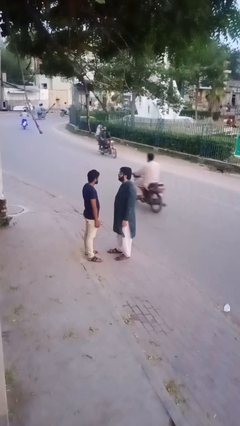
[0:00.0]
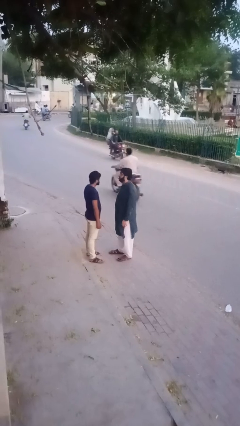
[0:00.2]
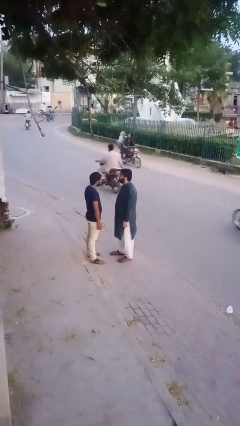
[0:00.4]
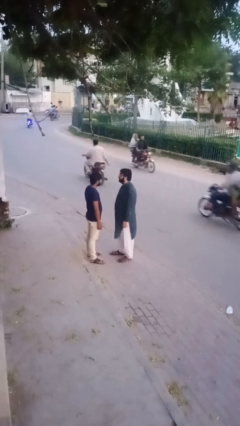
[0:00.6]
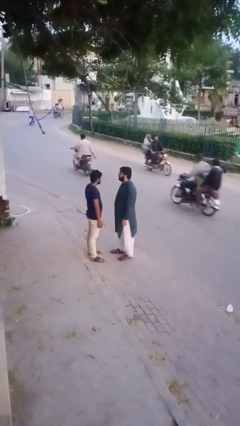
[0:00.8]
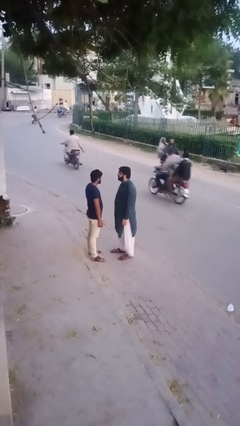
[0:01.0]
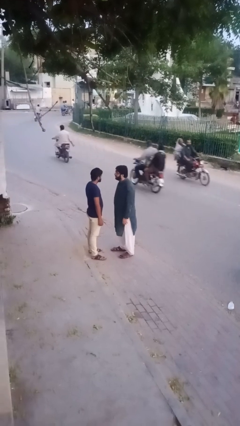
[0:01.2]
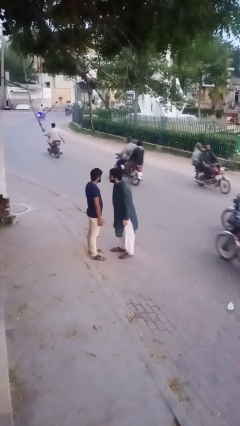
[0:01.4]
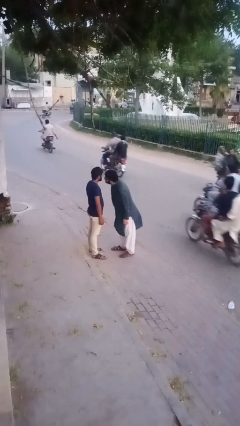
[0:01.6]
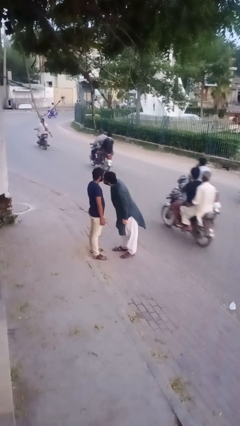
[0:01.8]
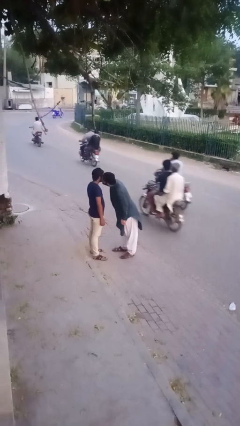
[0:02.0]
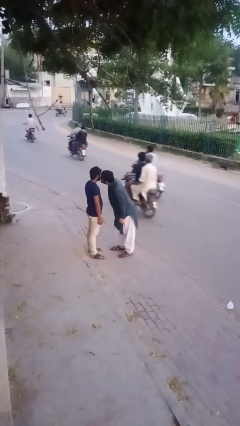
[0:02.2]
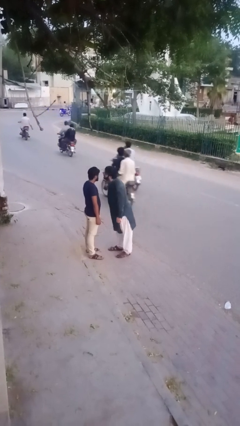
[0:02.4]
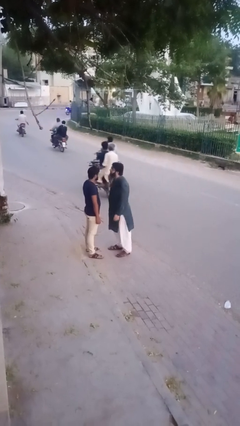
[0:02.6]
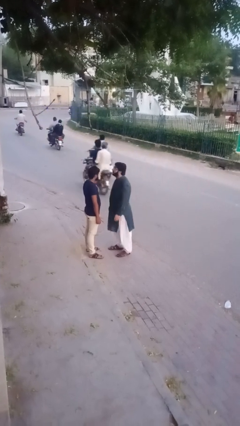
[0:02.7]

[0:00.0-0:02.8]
person kisses cheek of person

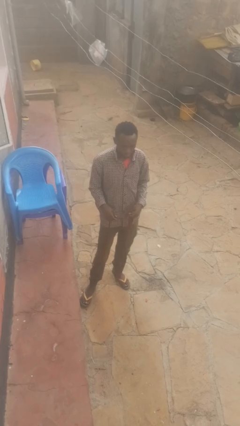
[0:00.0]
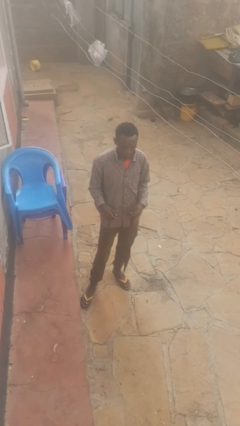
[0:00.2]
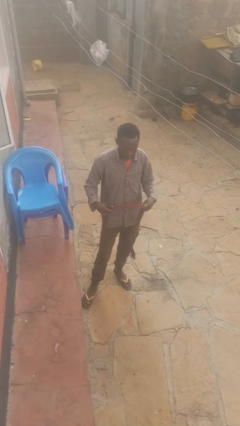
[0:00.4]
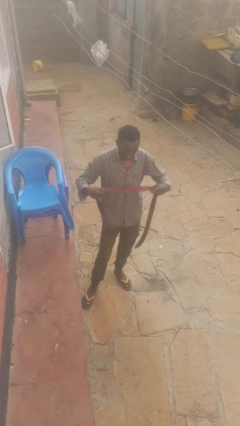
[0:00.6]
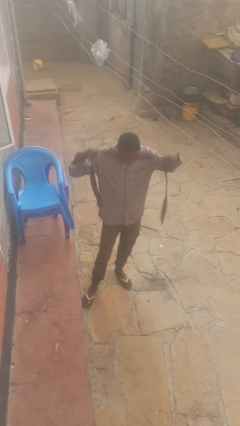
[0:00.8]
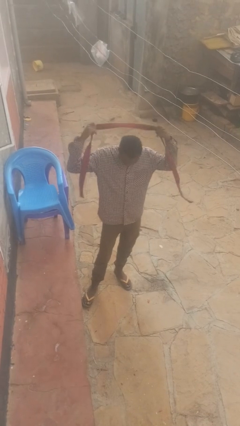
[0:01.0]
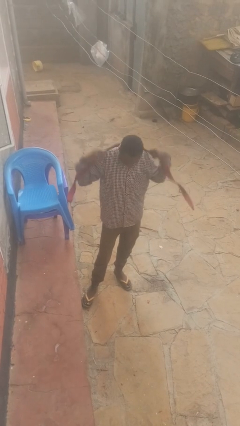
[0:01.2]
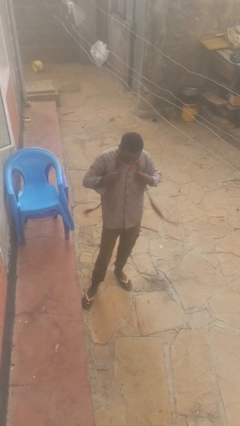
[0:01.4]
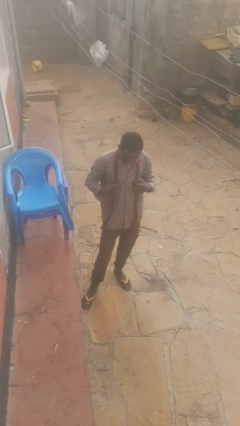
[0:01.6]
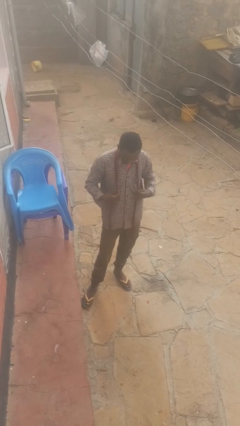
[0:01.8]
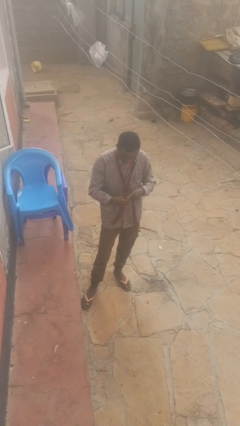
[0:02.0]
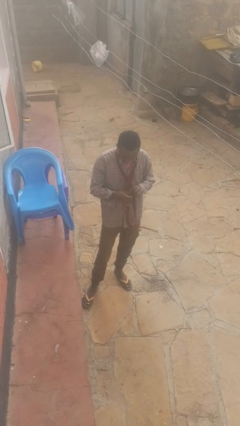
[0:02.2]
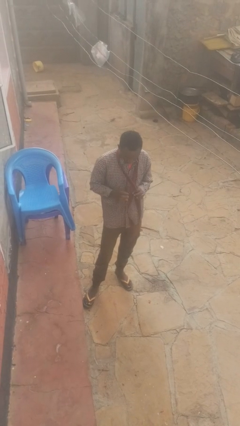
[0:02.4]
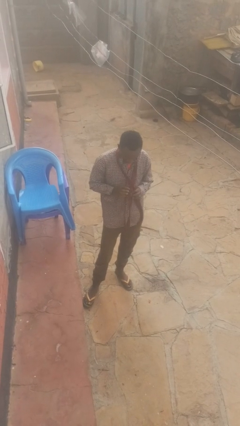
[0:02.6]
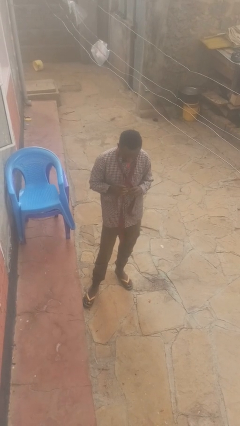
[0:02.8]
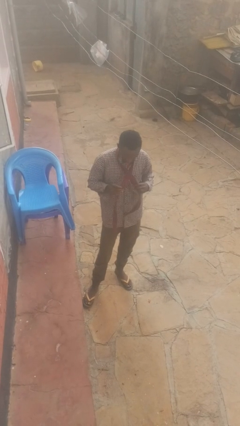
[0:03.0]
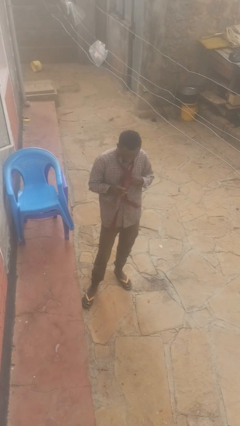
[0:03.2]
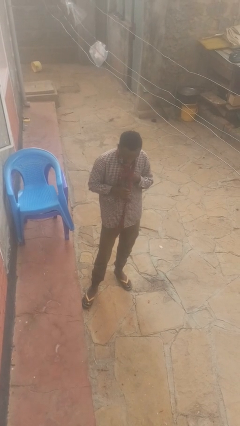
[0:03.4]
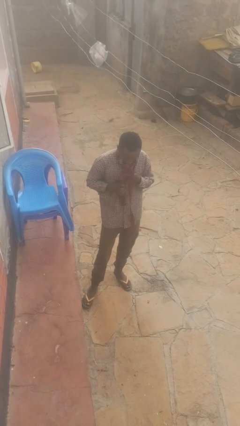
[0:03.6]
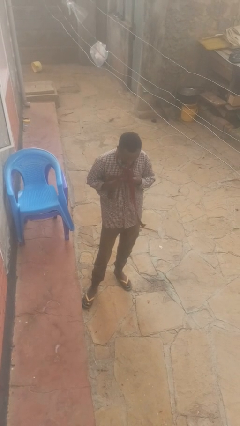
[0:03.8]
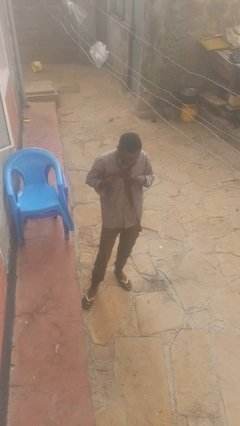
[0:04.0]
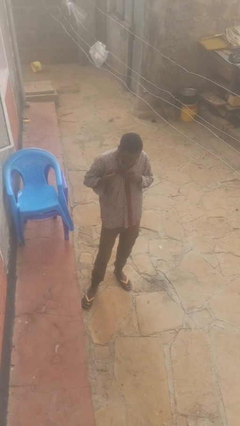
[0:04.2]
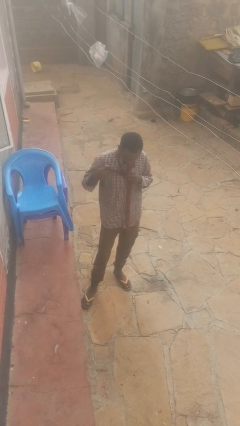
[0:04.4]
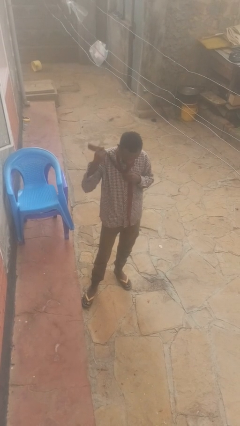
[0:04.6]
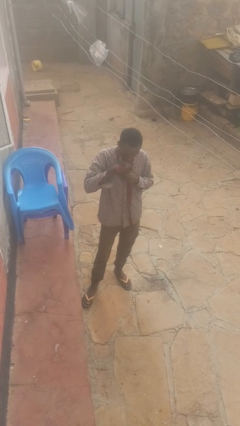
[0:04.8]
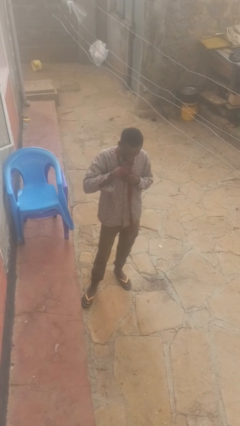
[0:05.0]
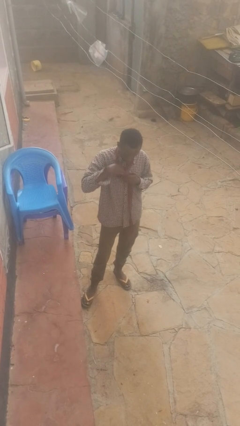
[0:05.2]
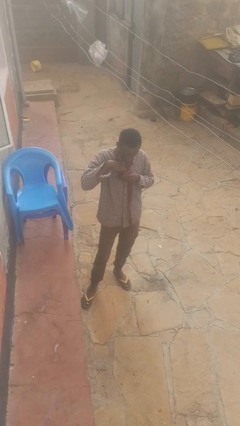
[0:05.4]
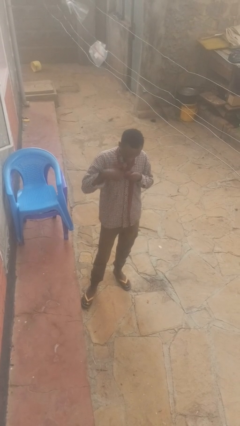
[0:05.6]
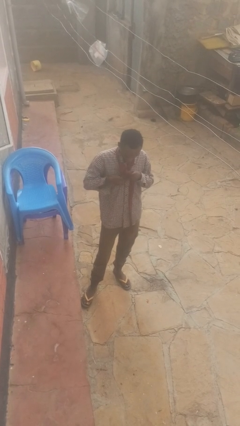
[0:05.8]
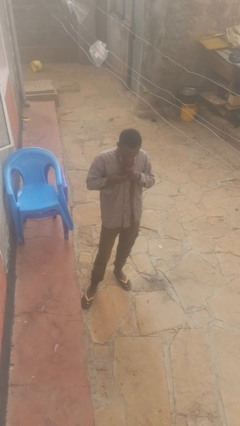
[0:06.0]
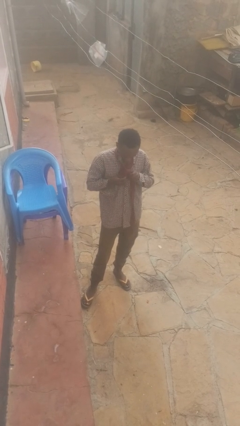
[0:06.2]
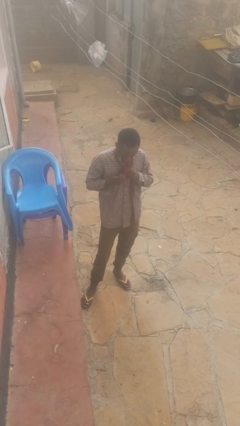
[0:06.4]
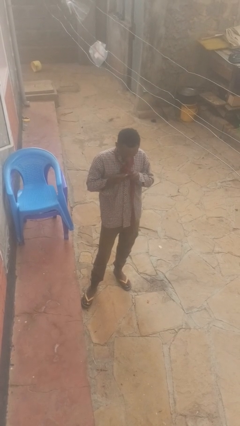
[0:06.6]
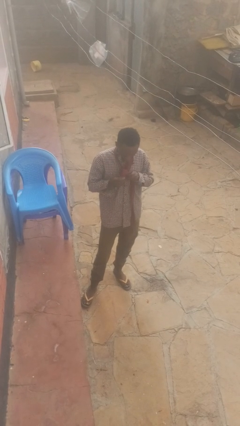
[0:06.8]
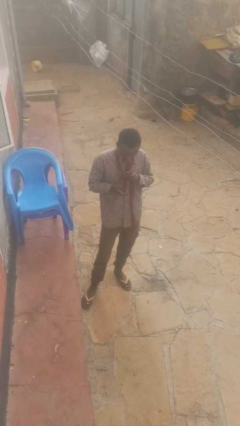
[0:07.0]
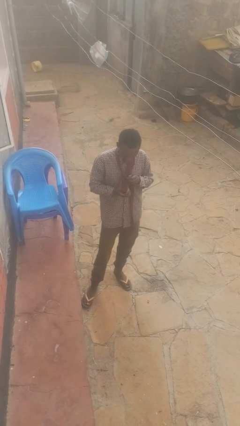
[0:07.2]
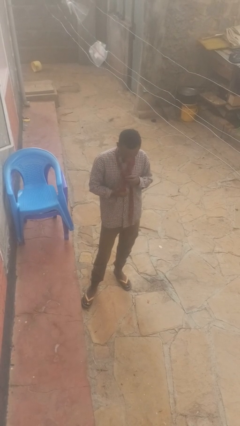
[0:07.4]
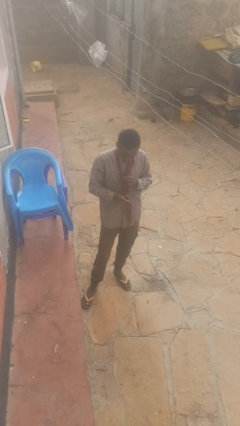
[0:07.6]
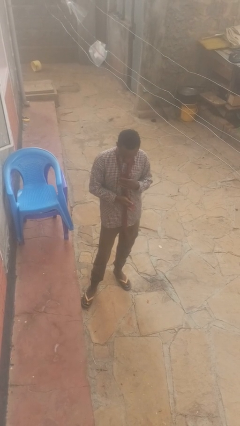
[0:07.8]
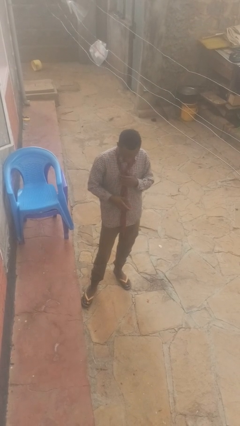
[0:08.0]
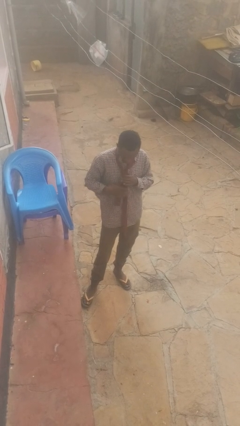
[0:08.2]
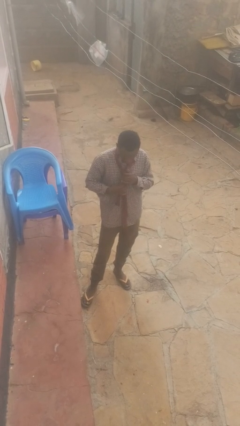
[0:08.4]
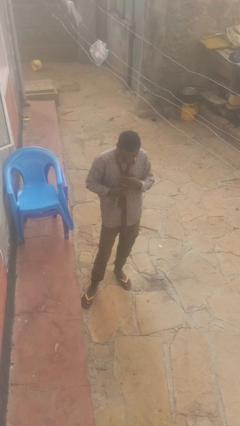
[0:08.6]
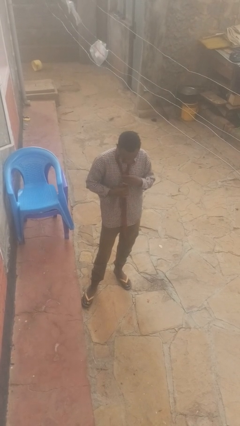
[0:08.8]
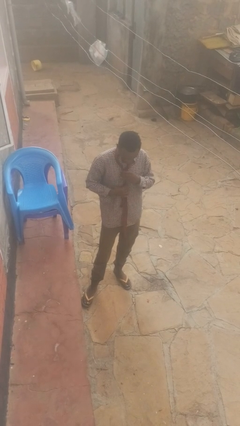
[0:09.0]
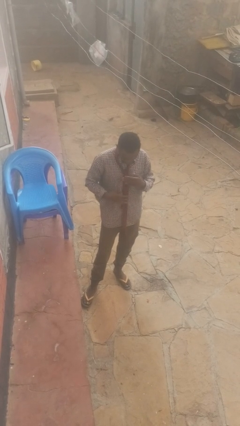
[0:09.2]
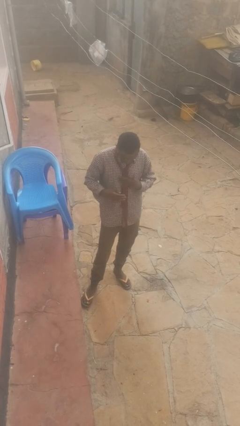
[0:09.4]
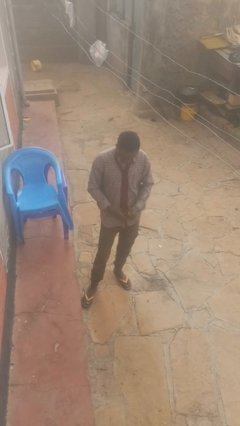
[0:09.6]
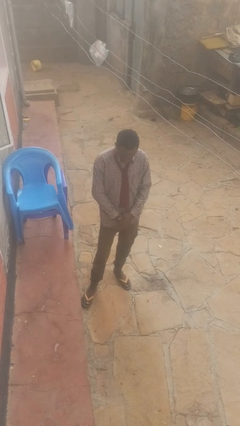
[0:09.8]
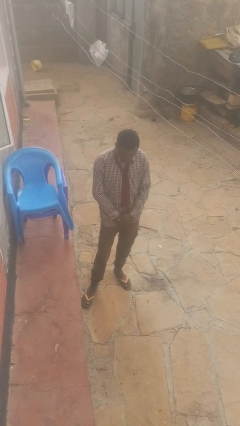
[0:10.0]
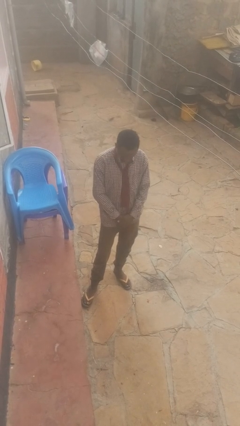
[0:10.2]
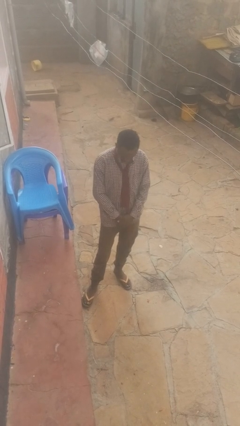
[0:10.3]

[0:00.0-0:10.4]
person puts on necktie

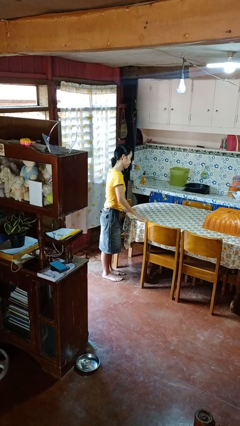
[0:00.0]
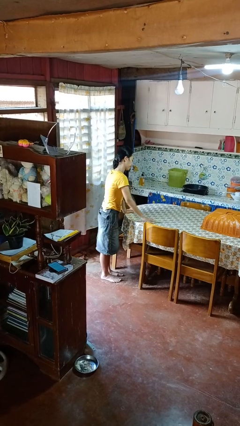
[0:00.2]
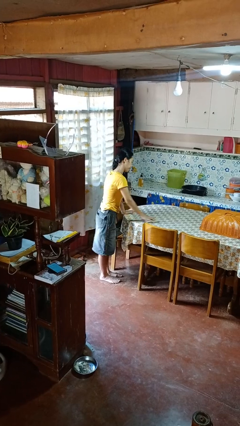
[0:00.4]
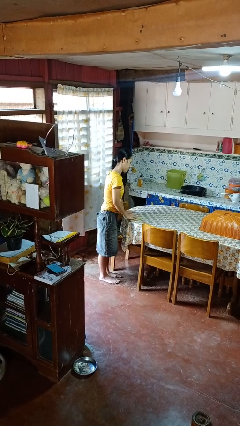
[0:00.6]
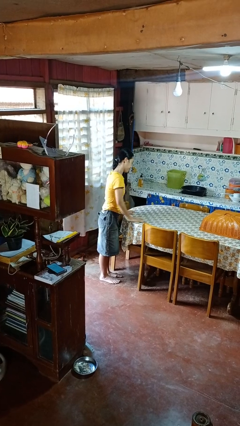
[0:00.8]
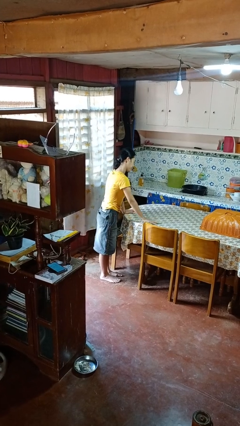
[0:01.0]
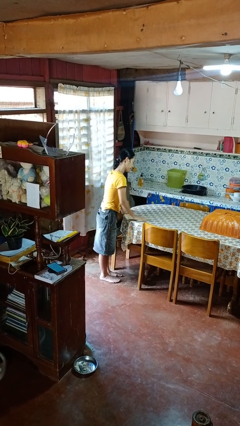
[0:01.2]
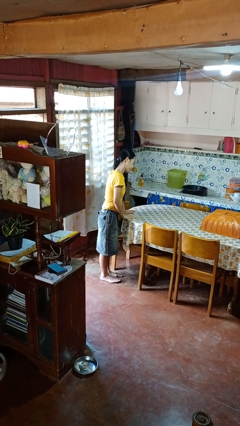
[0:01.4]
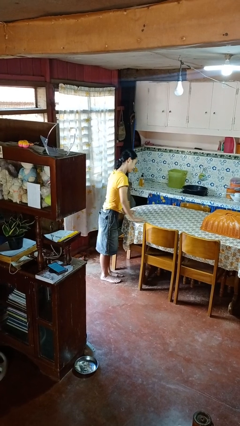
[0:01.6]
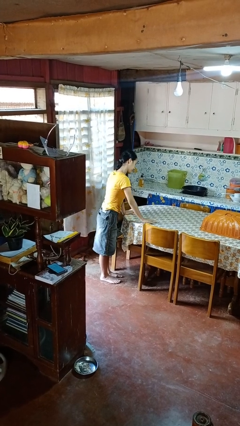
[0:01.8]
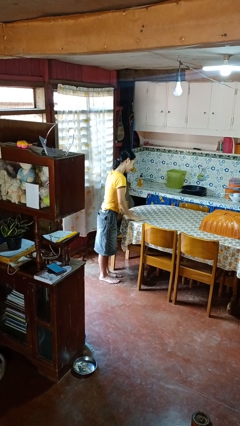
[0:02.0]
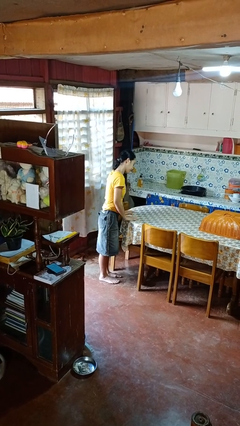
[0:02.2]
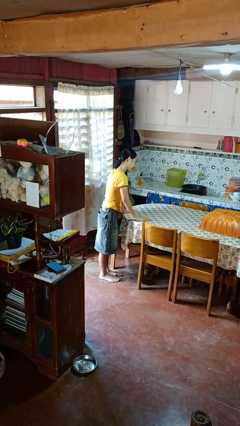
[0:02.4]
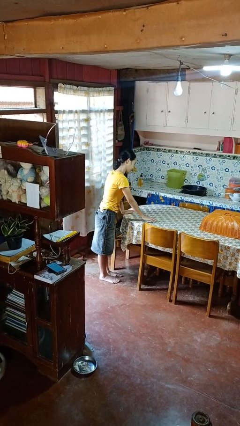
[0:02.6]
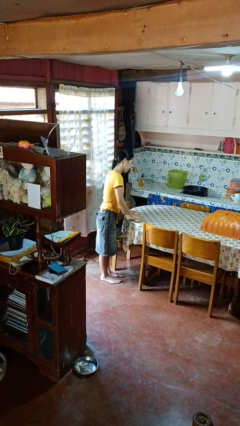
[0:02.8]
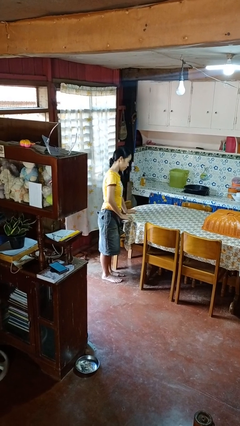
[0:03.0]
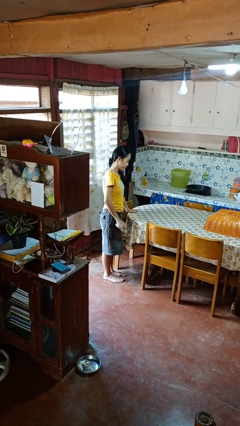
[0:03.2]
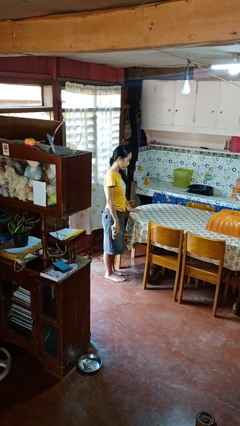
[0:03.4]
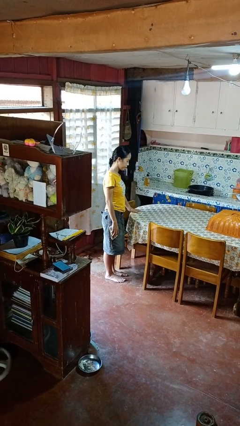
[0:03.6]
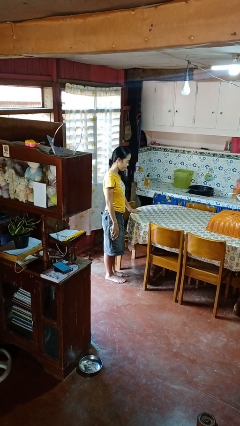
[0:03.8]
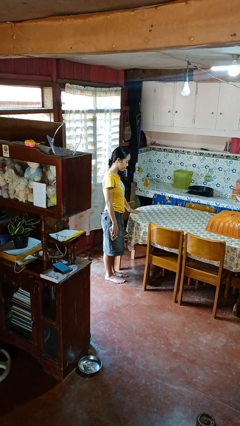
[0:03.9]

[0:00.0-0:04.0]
person cleans table with rag

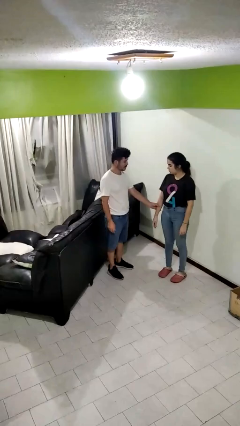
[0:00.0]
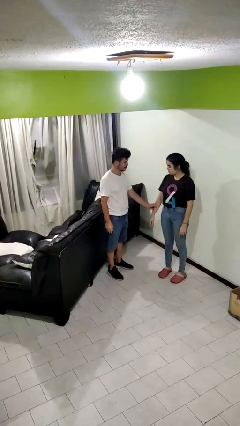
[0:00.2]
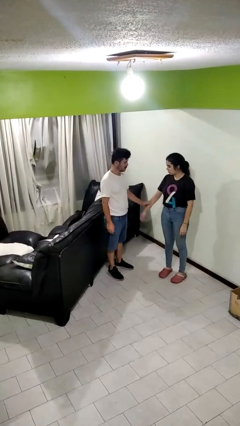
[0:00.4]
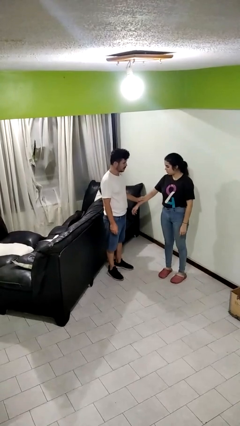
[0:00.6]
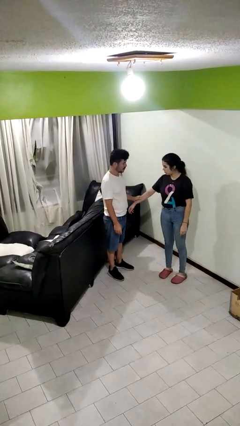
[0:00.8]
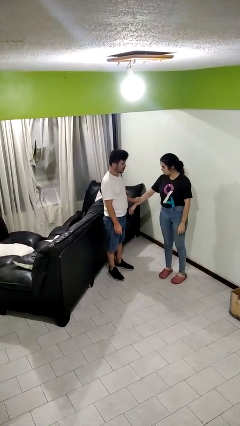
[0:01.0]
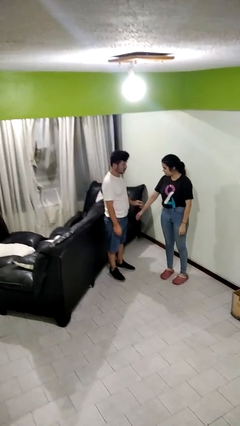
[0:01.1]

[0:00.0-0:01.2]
person grabs person by forearm
